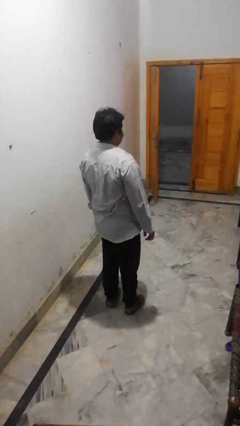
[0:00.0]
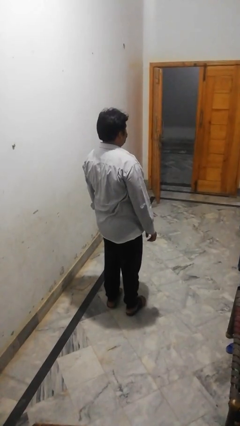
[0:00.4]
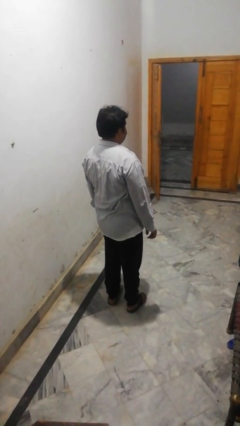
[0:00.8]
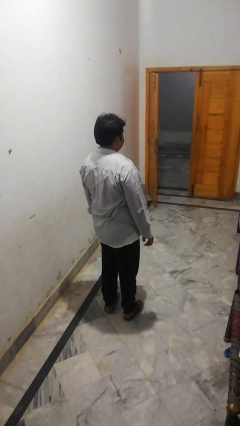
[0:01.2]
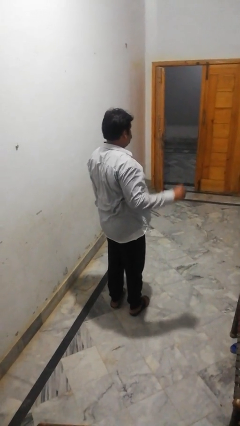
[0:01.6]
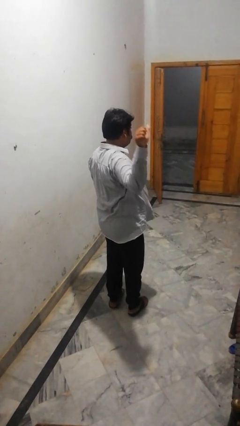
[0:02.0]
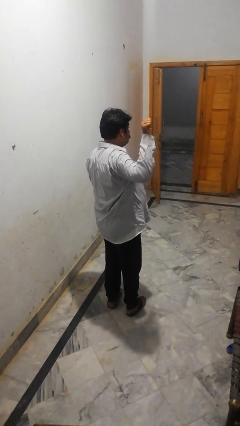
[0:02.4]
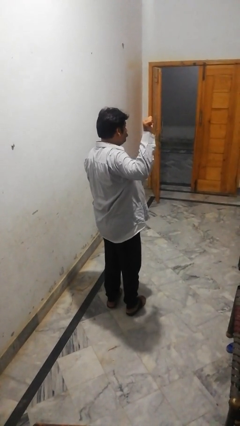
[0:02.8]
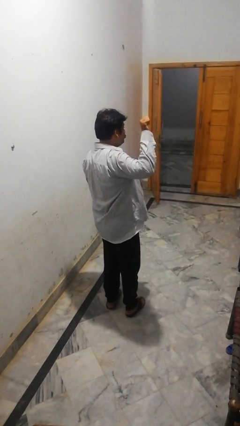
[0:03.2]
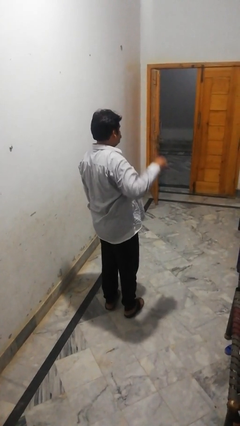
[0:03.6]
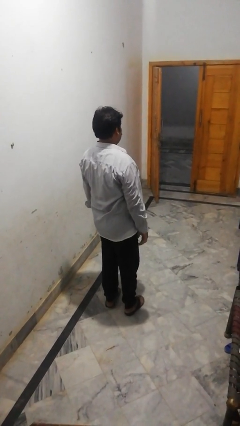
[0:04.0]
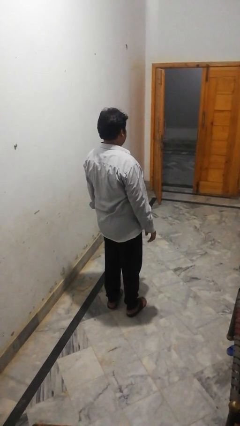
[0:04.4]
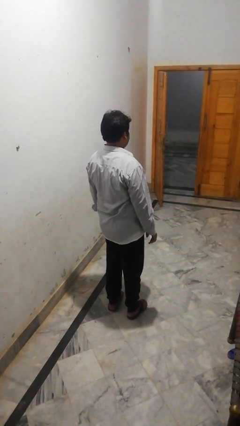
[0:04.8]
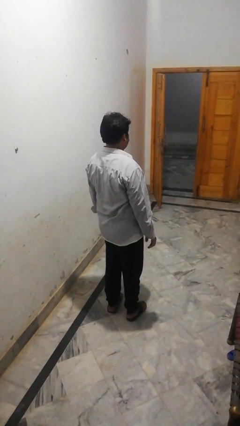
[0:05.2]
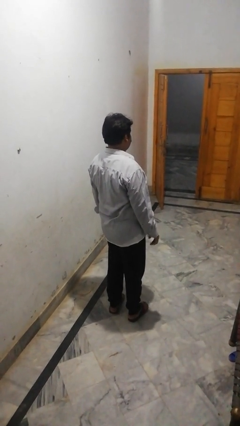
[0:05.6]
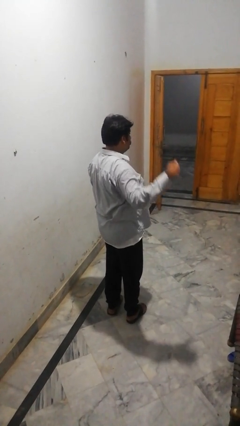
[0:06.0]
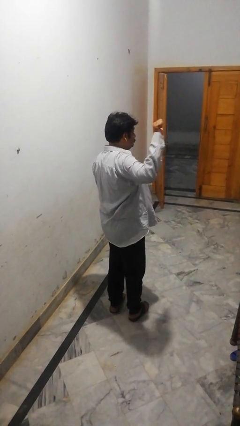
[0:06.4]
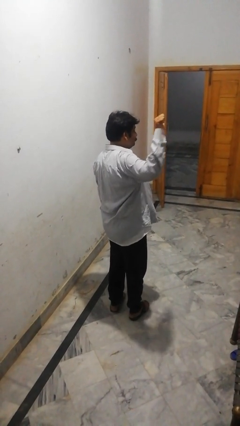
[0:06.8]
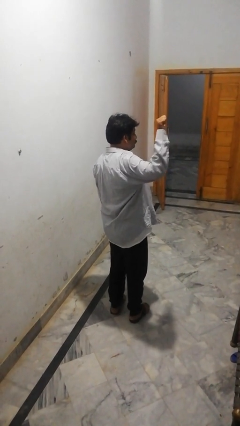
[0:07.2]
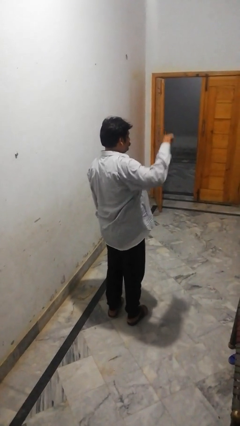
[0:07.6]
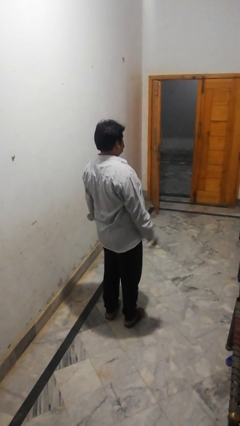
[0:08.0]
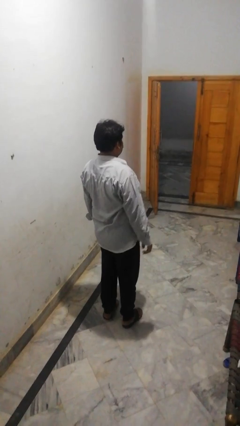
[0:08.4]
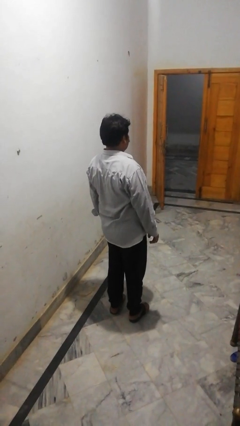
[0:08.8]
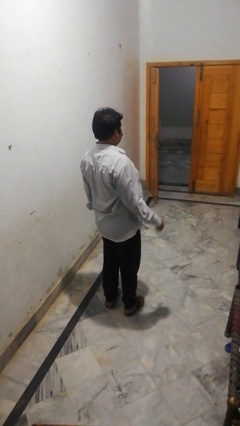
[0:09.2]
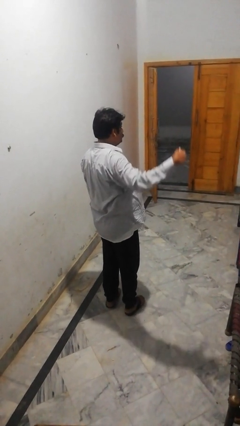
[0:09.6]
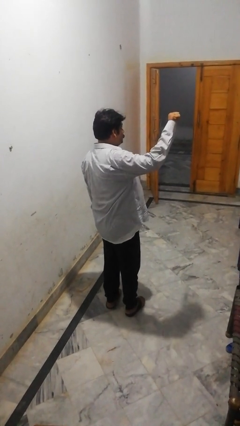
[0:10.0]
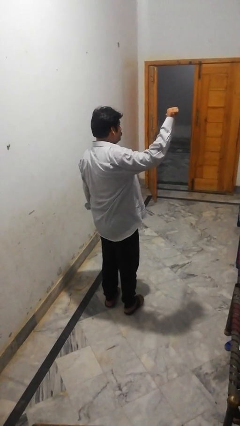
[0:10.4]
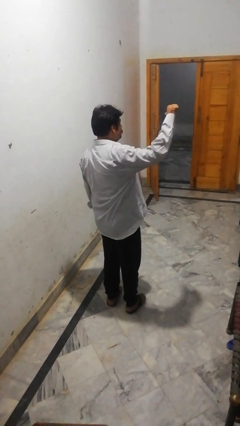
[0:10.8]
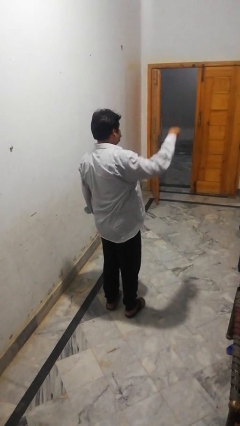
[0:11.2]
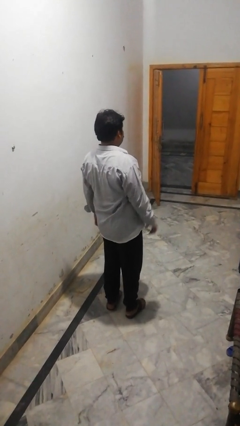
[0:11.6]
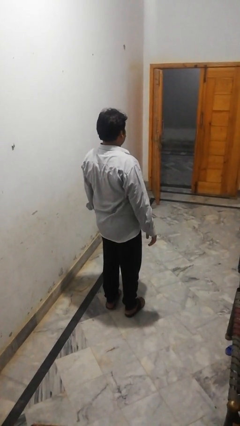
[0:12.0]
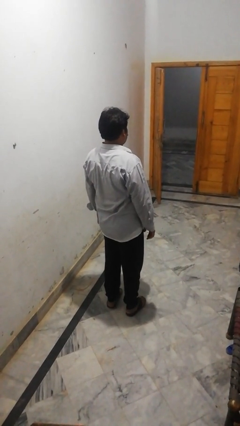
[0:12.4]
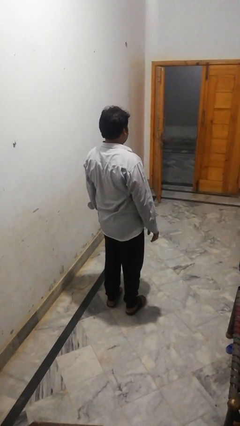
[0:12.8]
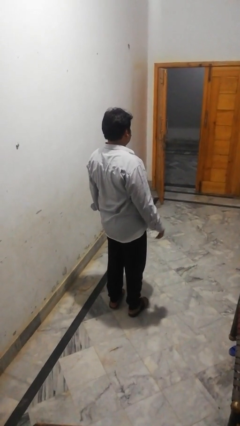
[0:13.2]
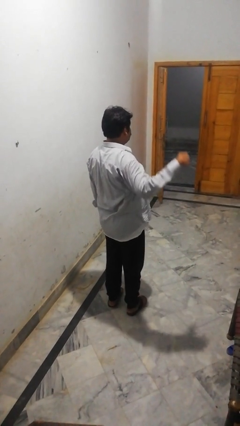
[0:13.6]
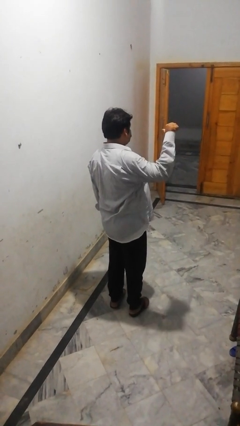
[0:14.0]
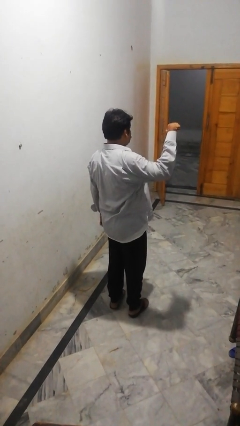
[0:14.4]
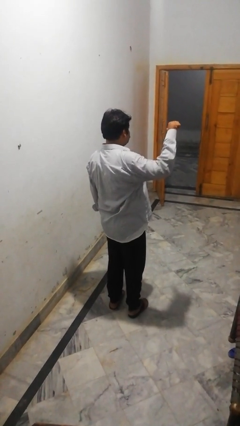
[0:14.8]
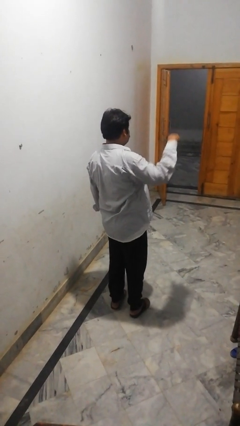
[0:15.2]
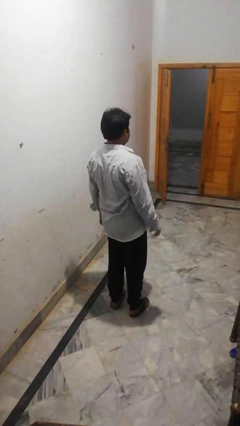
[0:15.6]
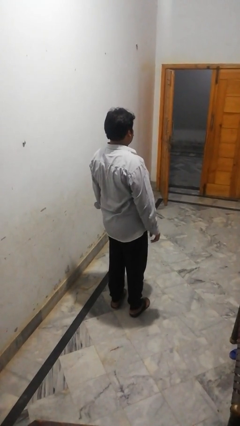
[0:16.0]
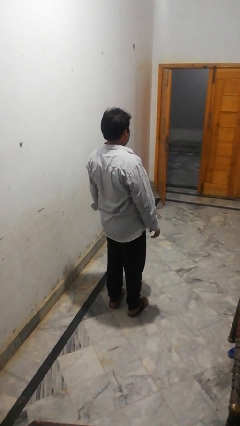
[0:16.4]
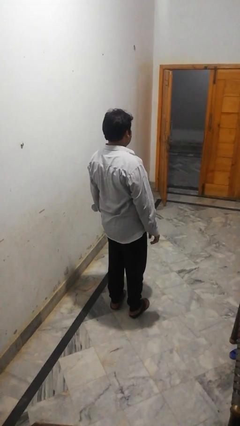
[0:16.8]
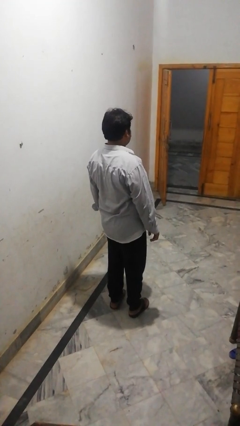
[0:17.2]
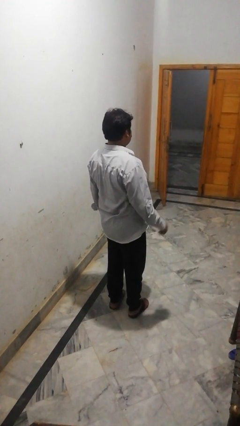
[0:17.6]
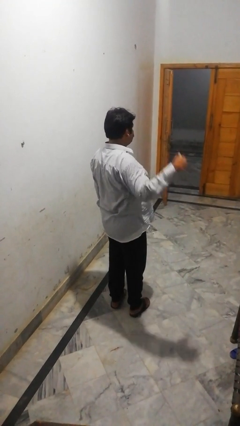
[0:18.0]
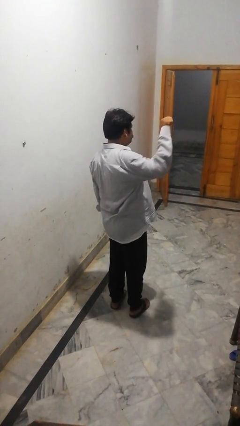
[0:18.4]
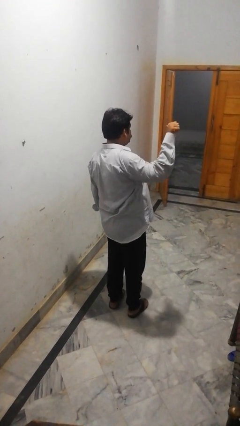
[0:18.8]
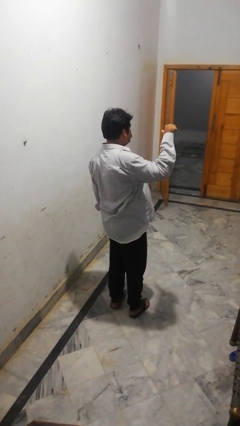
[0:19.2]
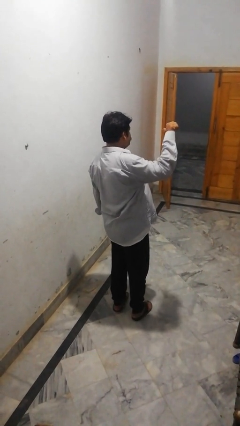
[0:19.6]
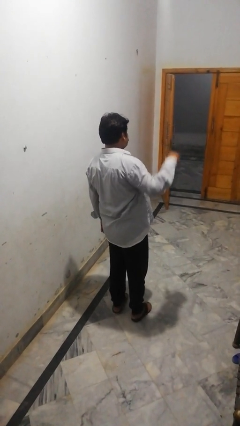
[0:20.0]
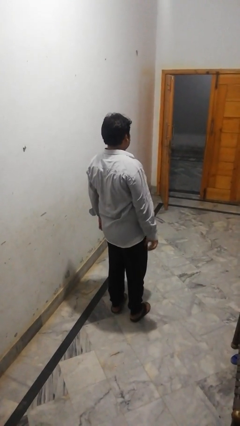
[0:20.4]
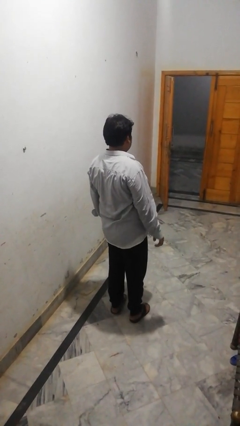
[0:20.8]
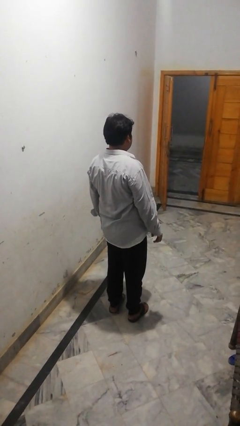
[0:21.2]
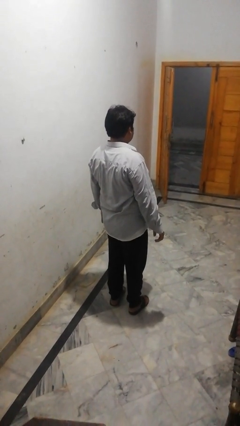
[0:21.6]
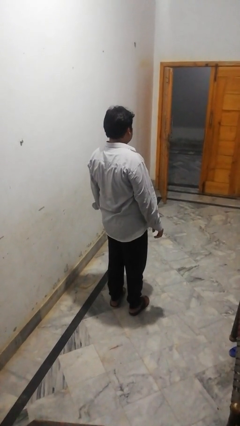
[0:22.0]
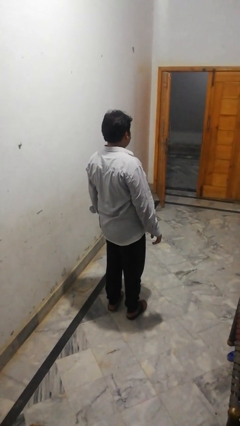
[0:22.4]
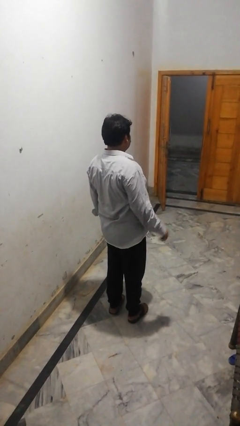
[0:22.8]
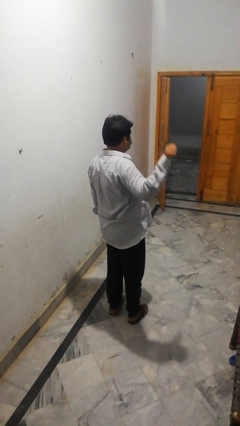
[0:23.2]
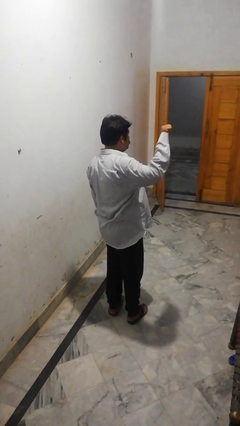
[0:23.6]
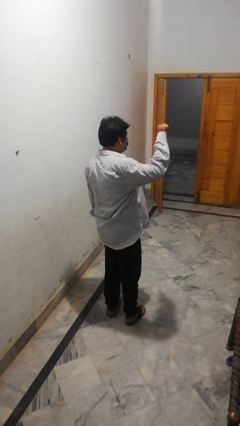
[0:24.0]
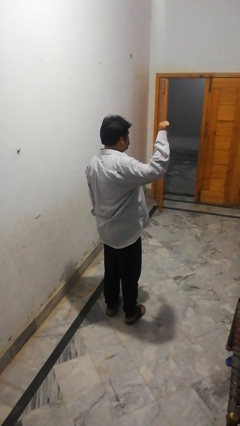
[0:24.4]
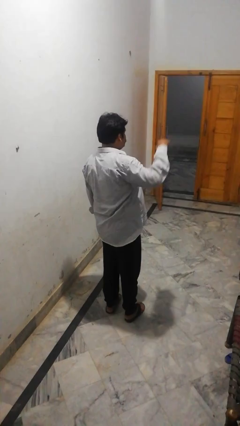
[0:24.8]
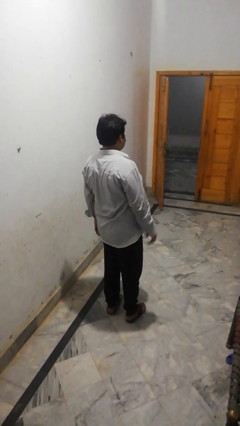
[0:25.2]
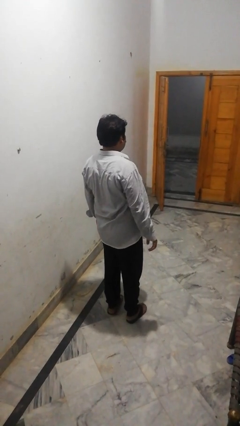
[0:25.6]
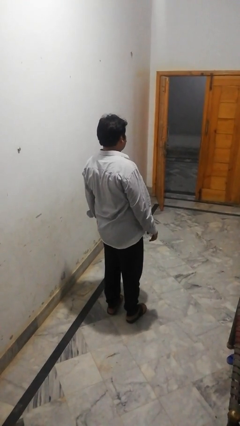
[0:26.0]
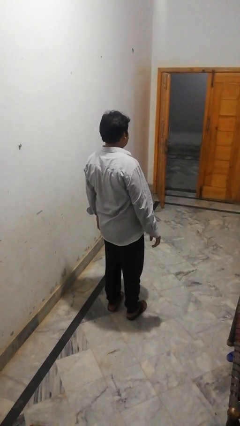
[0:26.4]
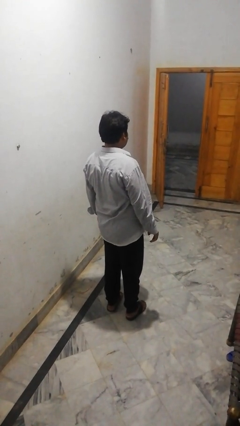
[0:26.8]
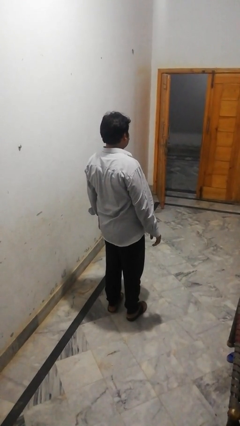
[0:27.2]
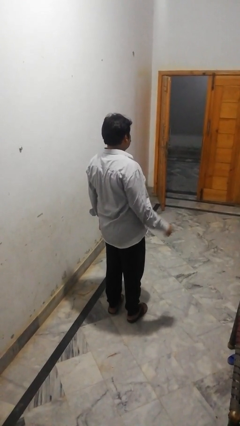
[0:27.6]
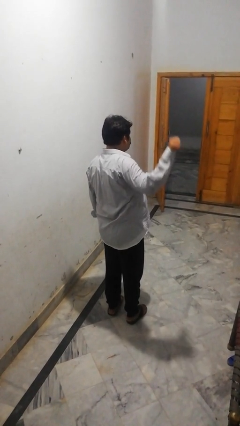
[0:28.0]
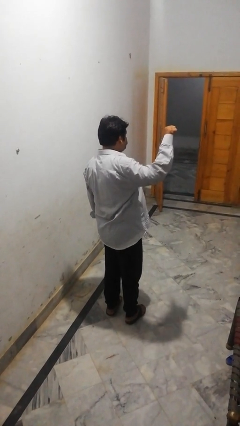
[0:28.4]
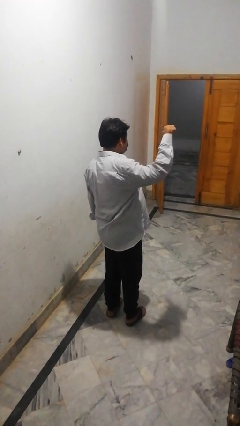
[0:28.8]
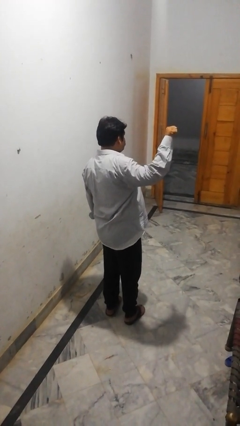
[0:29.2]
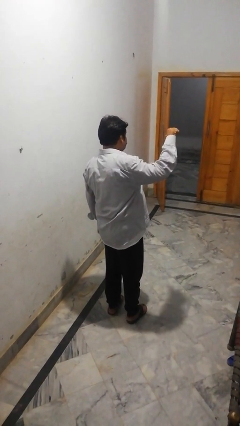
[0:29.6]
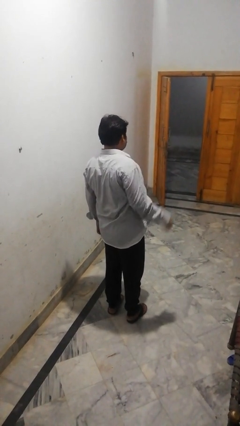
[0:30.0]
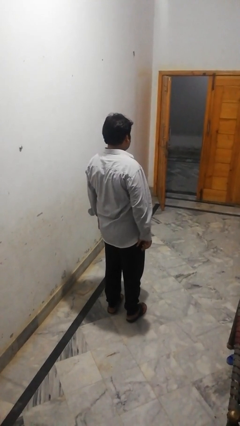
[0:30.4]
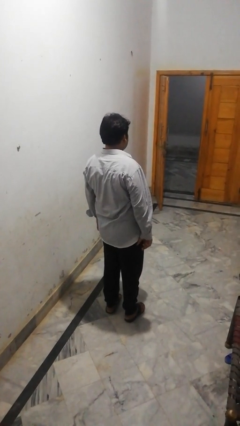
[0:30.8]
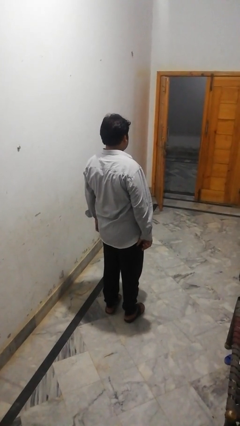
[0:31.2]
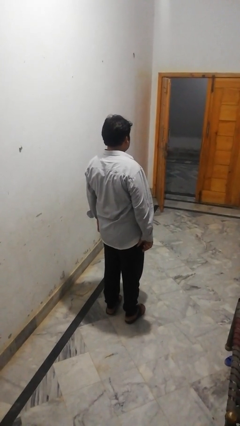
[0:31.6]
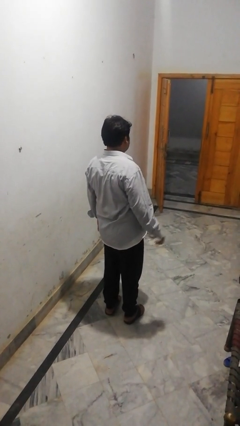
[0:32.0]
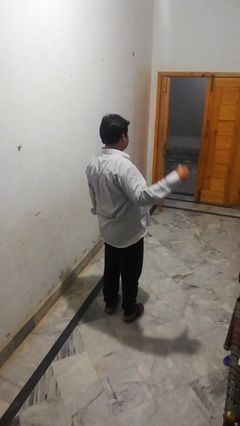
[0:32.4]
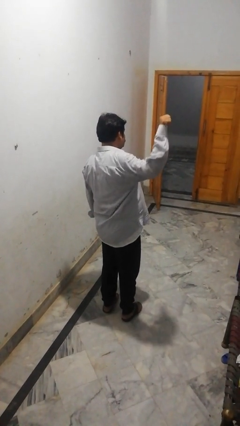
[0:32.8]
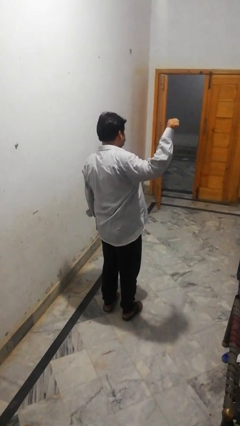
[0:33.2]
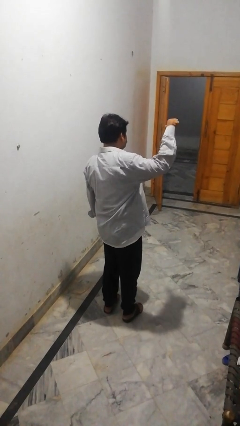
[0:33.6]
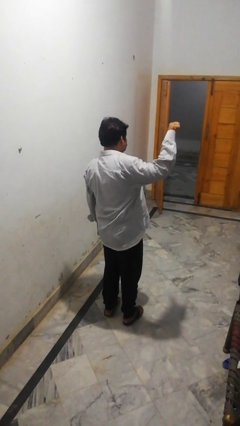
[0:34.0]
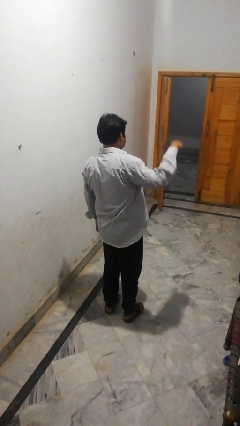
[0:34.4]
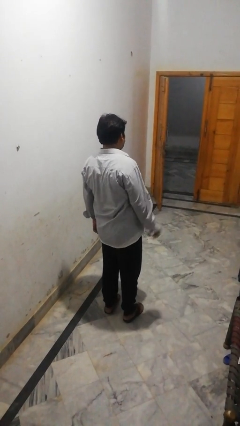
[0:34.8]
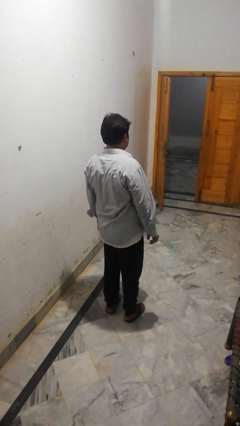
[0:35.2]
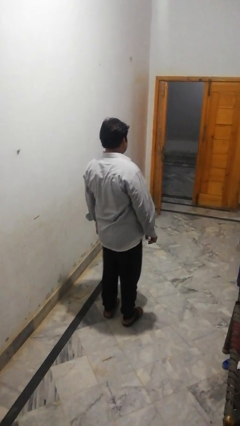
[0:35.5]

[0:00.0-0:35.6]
person gestures behind me

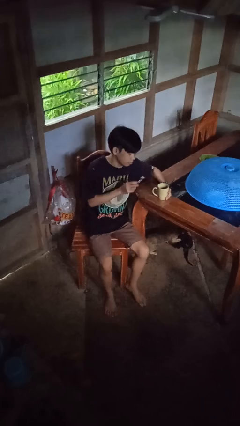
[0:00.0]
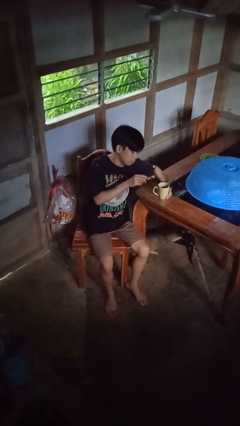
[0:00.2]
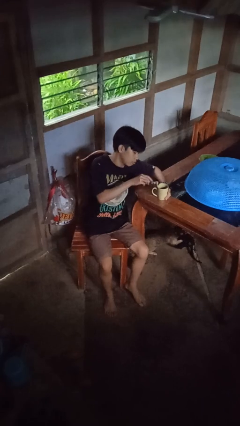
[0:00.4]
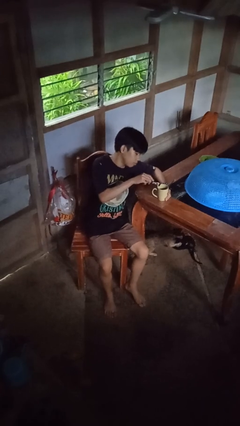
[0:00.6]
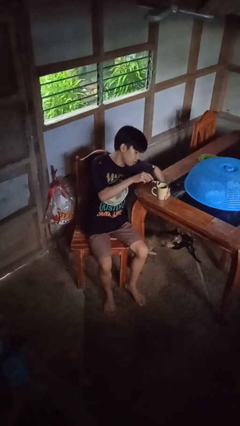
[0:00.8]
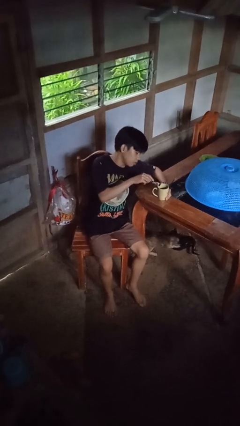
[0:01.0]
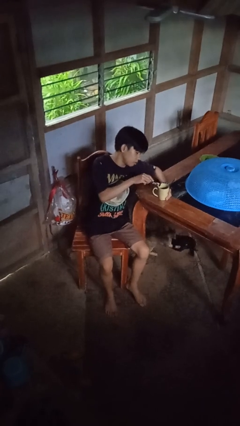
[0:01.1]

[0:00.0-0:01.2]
person pours coffee into mug
